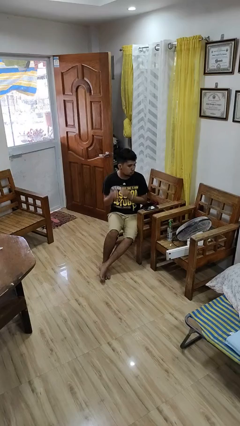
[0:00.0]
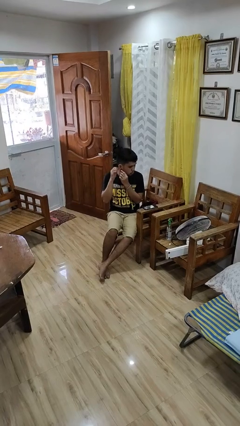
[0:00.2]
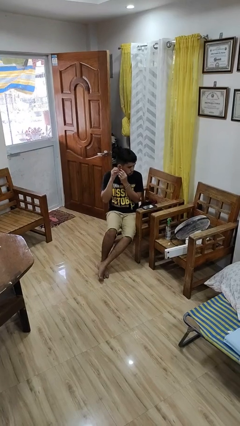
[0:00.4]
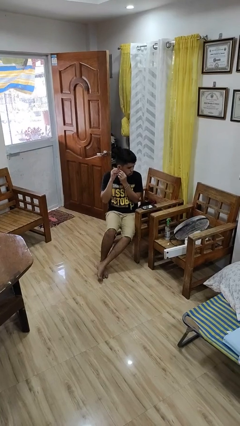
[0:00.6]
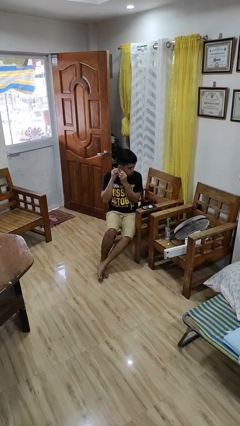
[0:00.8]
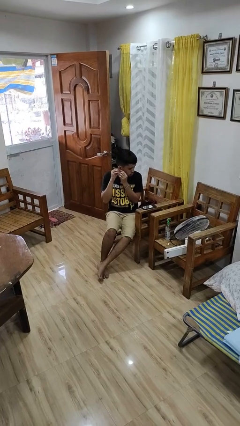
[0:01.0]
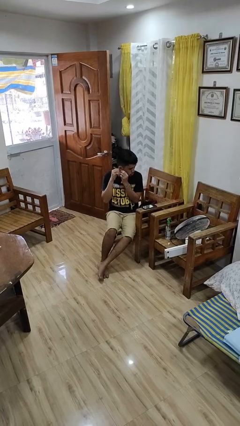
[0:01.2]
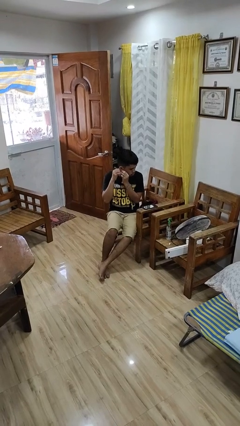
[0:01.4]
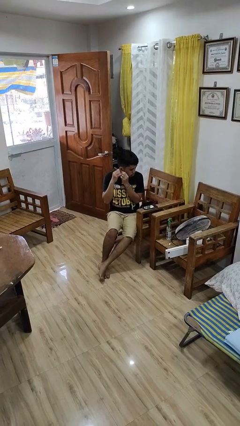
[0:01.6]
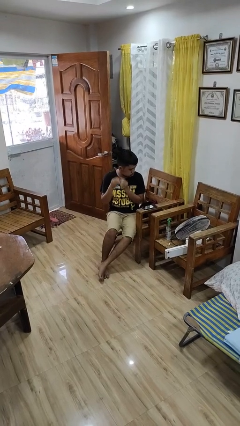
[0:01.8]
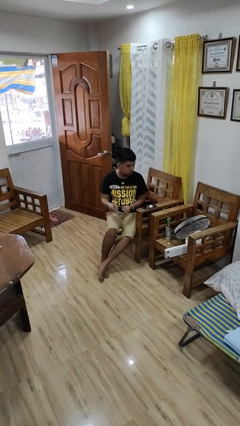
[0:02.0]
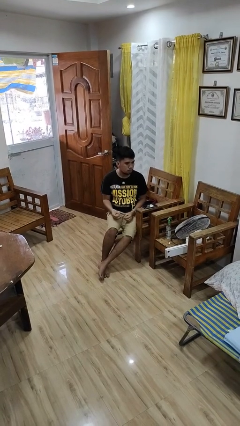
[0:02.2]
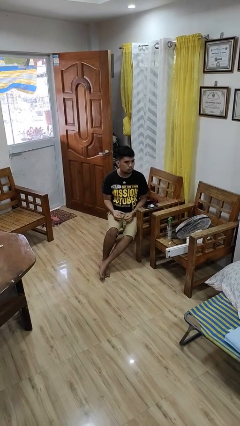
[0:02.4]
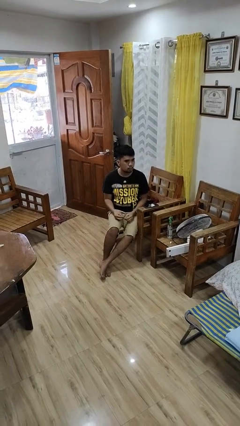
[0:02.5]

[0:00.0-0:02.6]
person takes off earrings

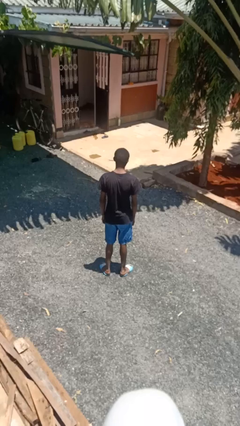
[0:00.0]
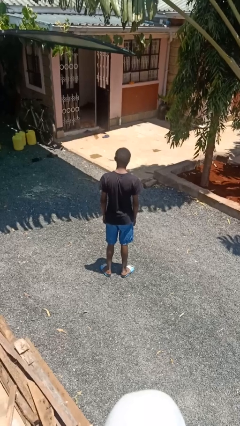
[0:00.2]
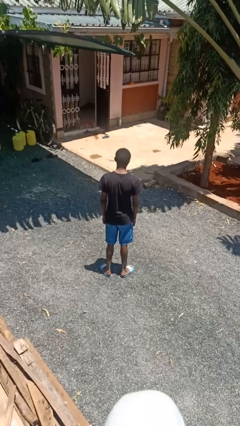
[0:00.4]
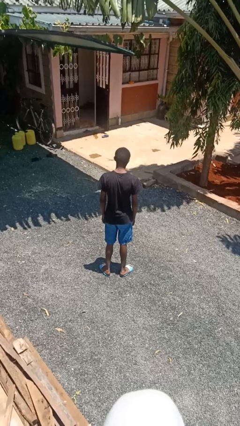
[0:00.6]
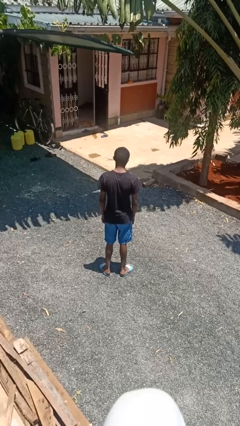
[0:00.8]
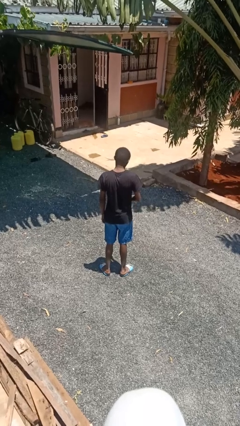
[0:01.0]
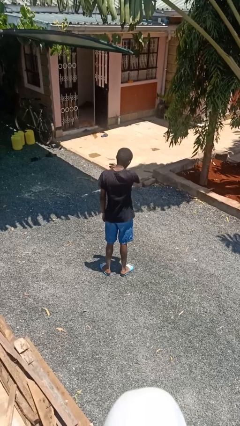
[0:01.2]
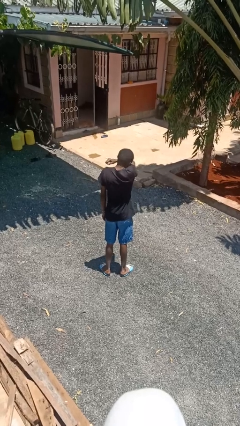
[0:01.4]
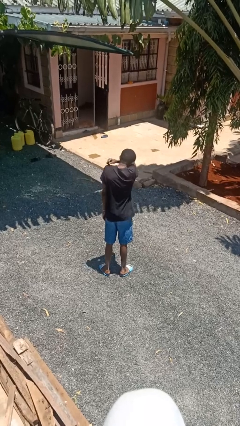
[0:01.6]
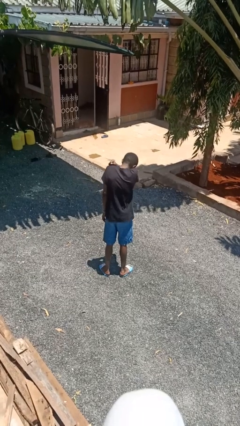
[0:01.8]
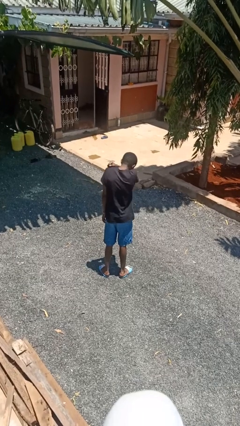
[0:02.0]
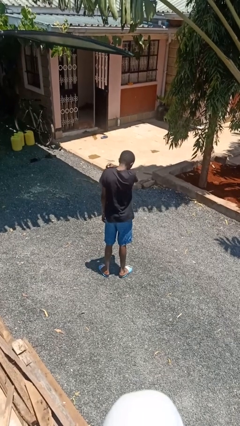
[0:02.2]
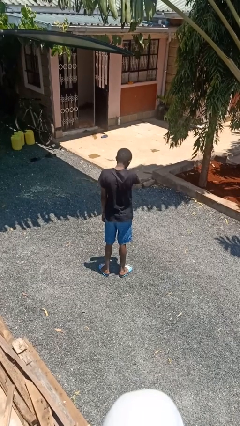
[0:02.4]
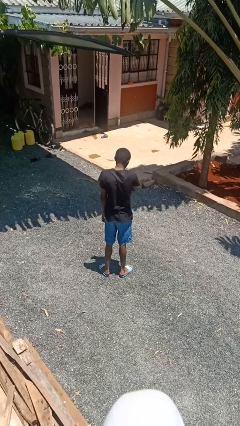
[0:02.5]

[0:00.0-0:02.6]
person sneezes into arm

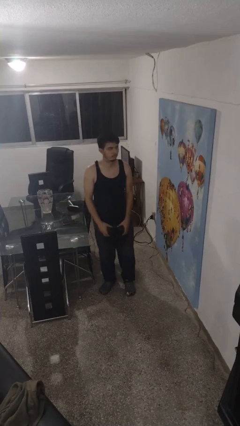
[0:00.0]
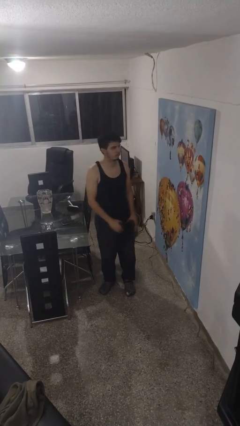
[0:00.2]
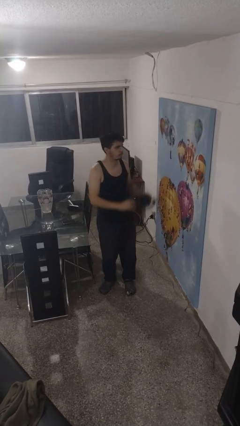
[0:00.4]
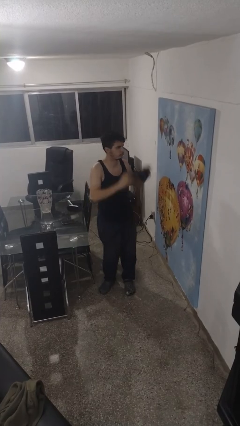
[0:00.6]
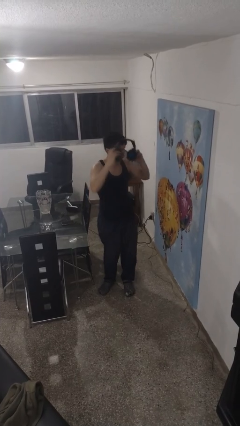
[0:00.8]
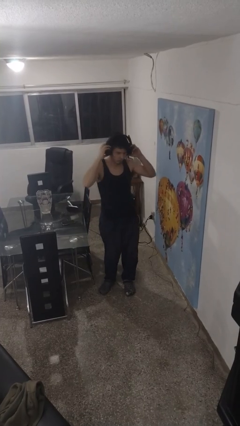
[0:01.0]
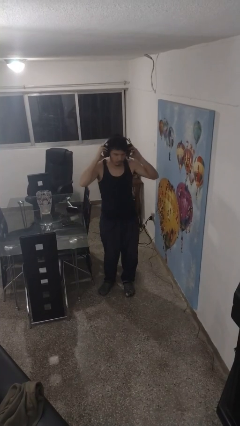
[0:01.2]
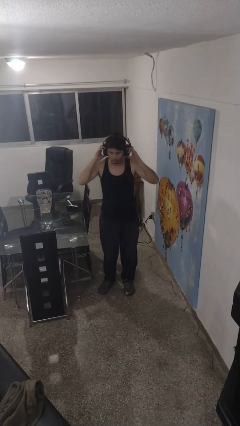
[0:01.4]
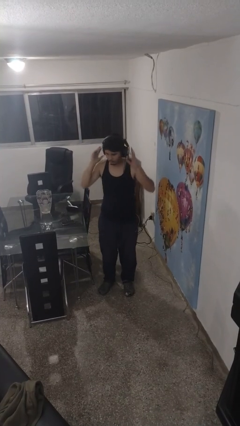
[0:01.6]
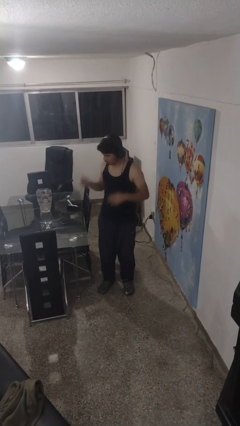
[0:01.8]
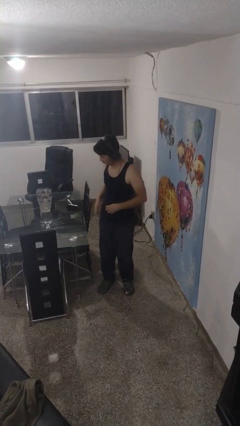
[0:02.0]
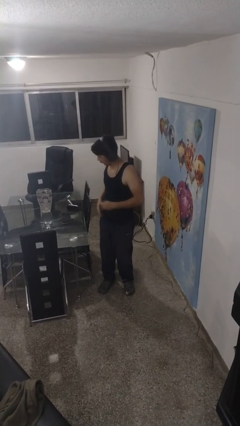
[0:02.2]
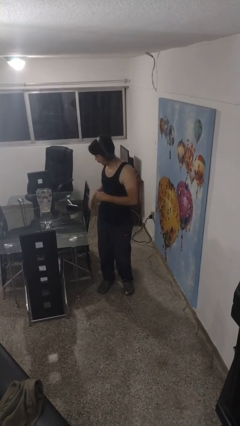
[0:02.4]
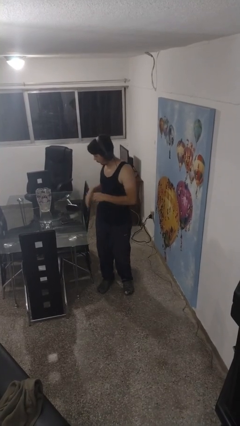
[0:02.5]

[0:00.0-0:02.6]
person puts on headphones

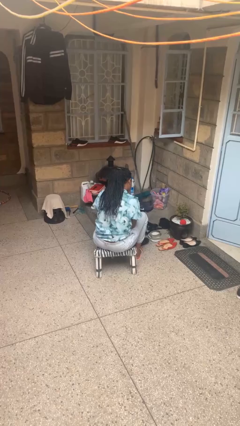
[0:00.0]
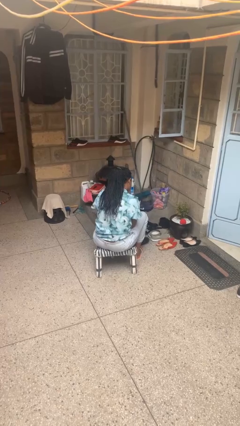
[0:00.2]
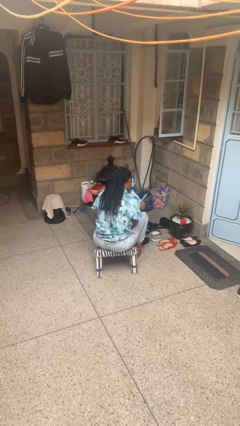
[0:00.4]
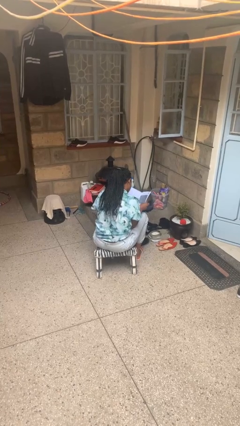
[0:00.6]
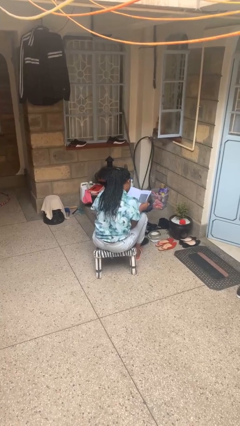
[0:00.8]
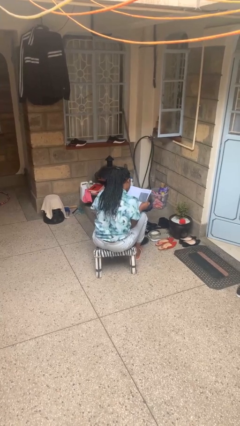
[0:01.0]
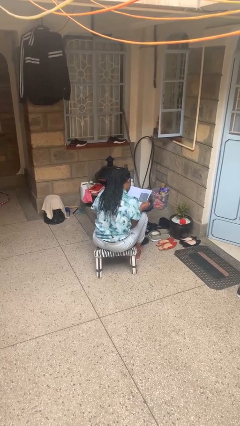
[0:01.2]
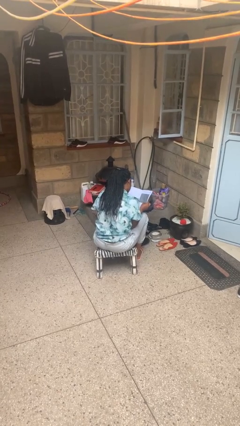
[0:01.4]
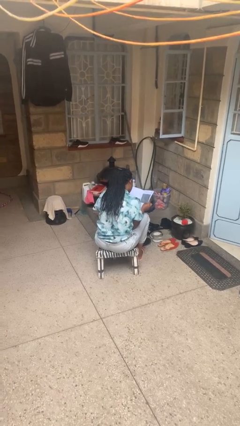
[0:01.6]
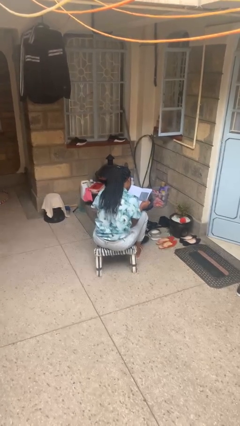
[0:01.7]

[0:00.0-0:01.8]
person reads magazine

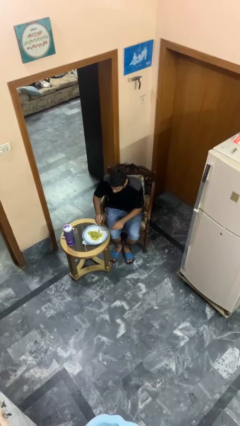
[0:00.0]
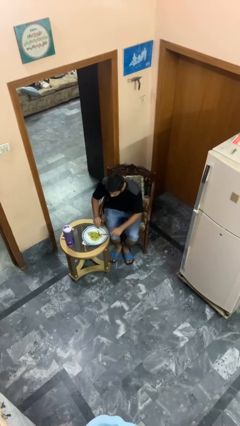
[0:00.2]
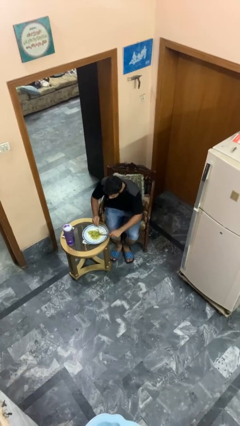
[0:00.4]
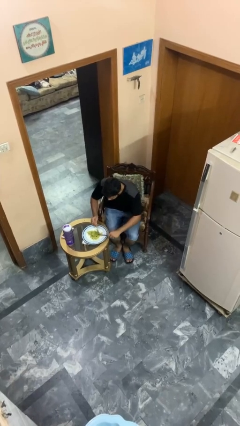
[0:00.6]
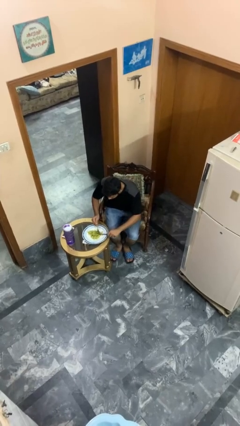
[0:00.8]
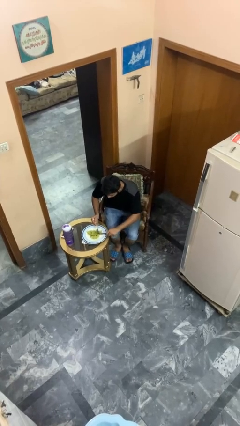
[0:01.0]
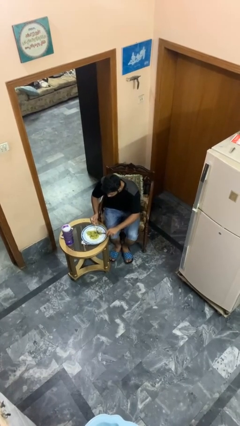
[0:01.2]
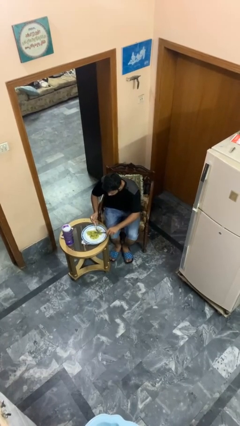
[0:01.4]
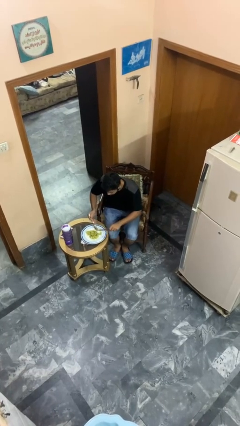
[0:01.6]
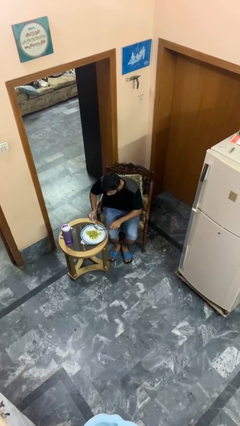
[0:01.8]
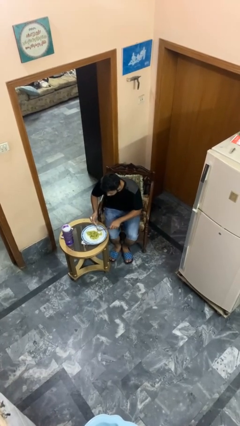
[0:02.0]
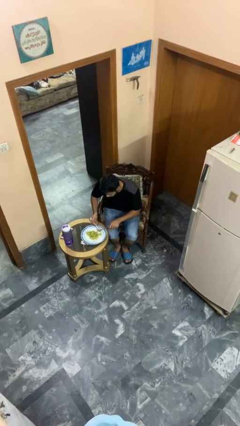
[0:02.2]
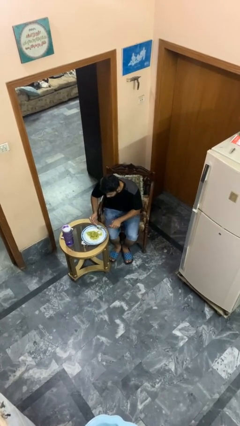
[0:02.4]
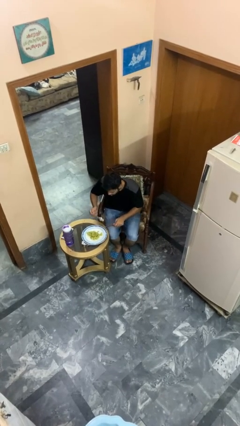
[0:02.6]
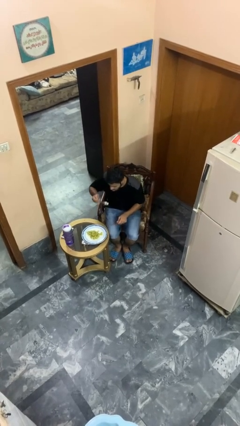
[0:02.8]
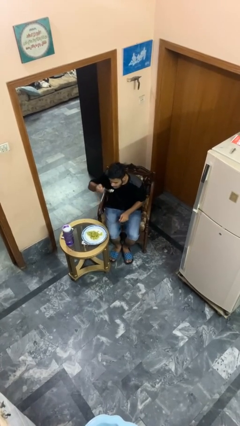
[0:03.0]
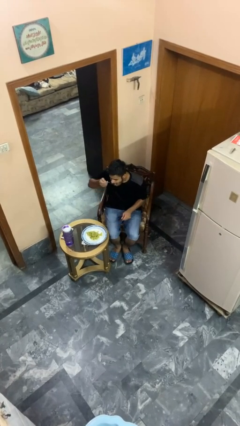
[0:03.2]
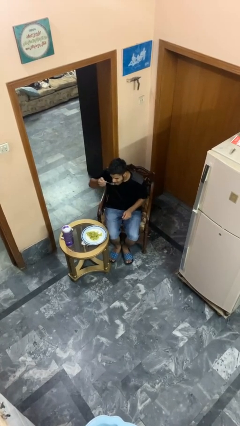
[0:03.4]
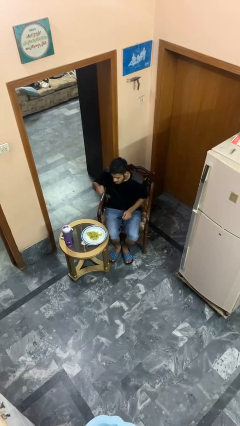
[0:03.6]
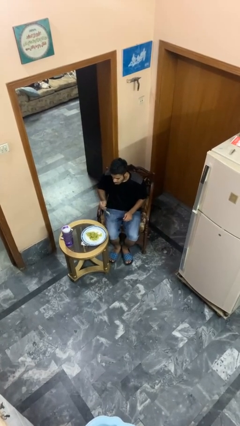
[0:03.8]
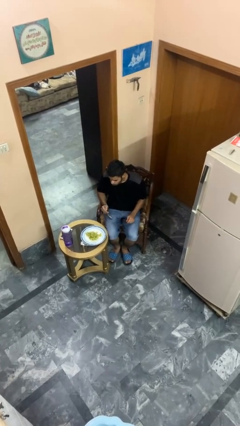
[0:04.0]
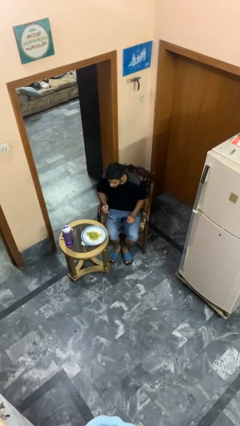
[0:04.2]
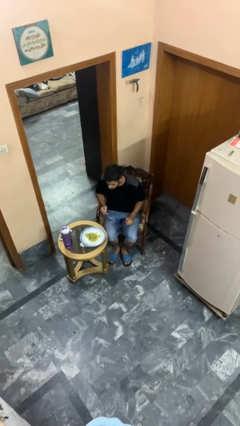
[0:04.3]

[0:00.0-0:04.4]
person eats with utensil

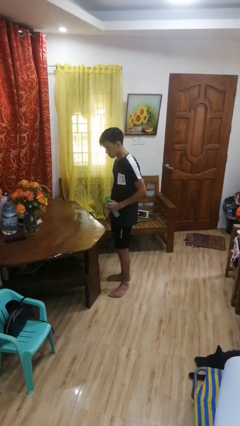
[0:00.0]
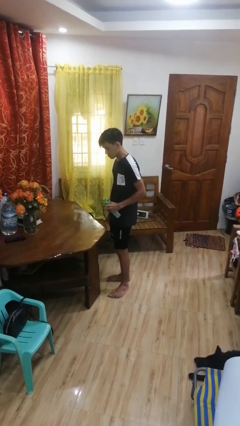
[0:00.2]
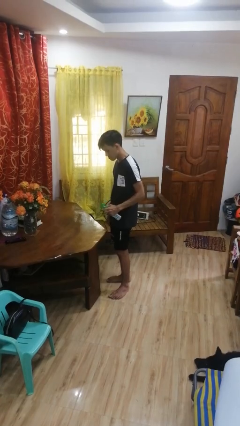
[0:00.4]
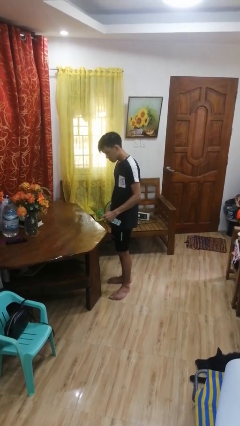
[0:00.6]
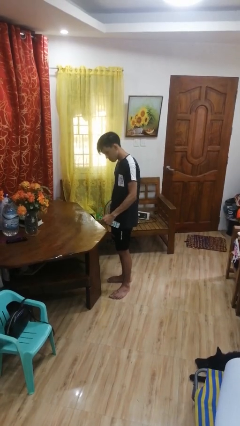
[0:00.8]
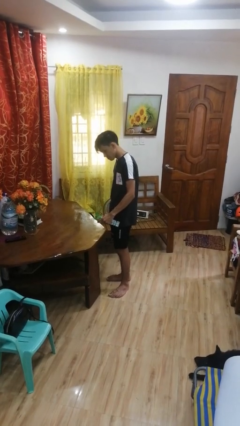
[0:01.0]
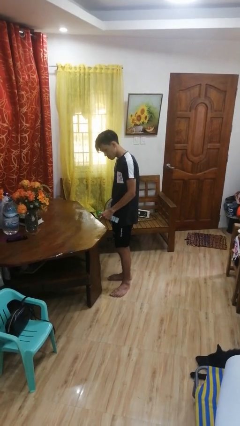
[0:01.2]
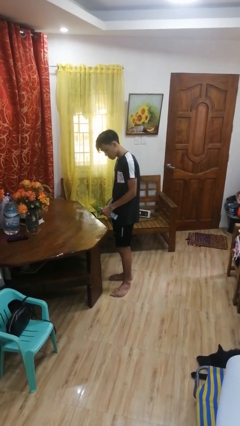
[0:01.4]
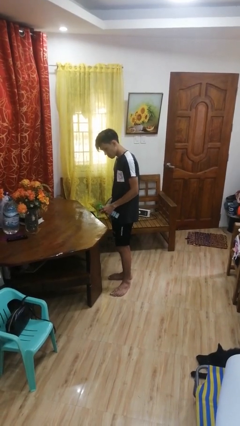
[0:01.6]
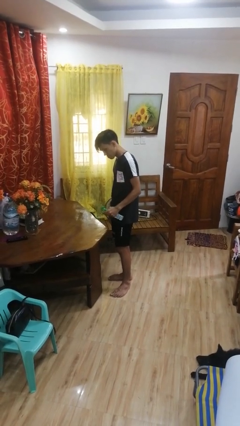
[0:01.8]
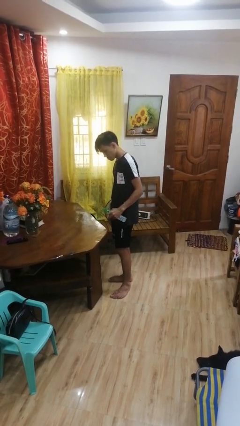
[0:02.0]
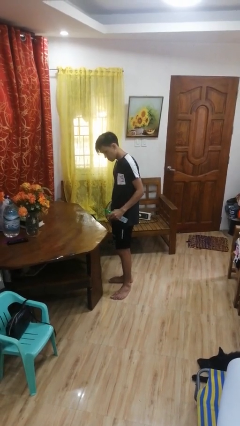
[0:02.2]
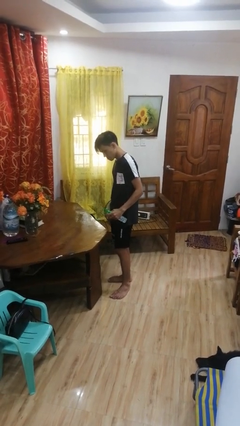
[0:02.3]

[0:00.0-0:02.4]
person sprays from bottle

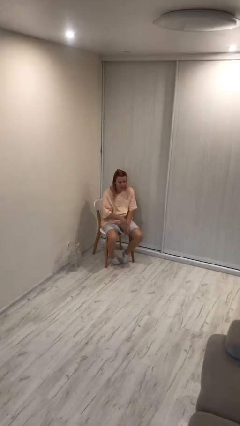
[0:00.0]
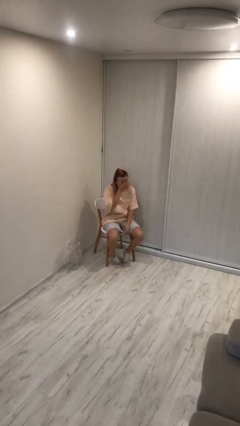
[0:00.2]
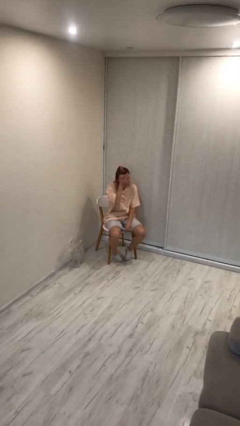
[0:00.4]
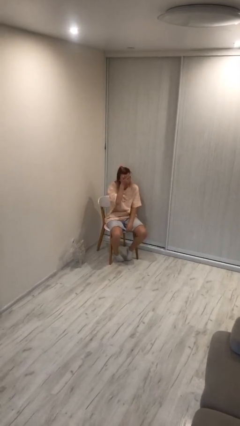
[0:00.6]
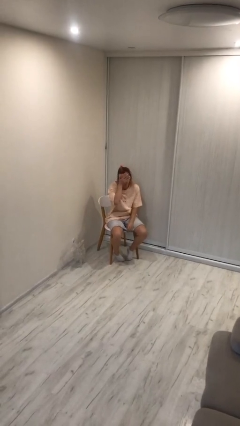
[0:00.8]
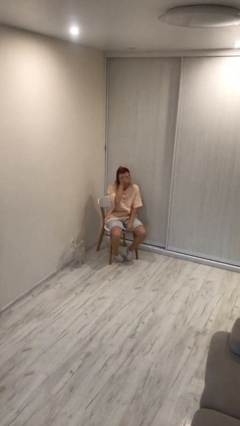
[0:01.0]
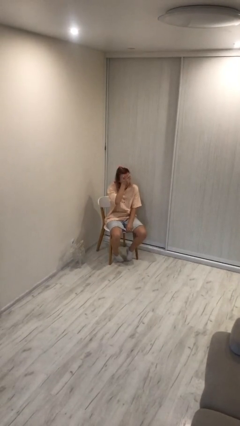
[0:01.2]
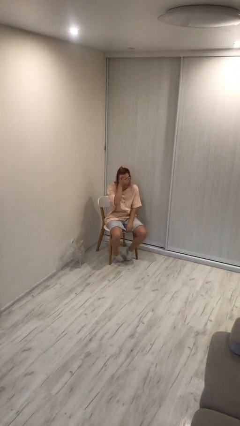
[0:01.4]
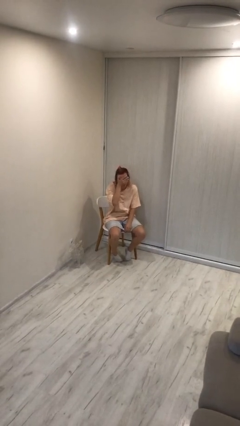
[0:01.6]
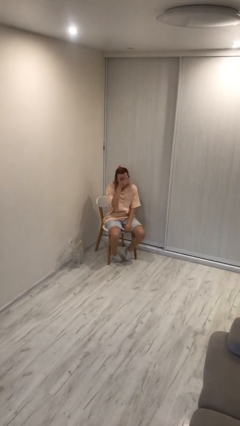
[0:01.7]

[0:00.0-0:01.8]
person covers face with hands
